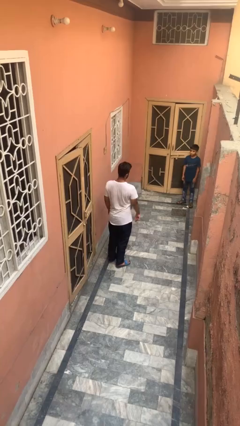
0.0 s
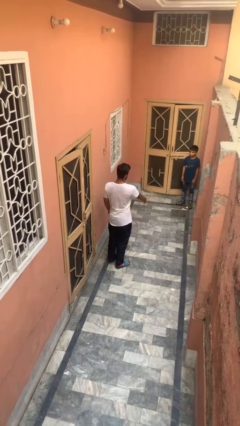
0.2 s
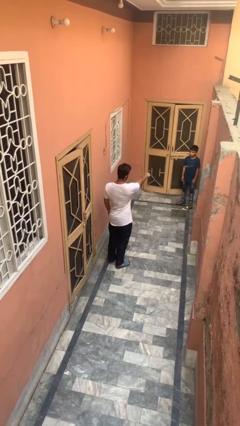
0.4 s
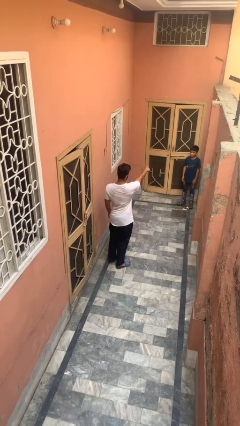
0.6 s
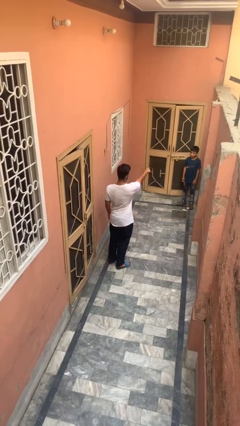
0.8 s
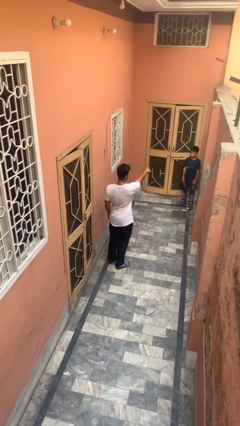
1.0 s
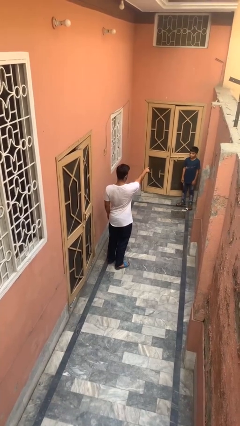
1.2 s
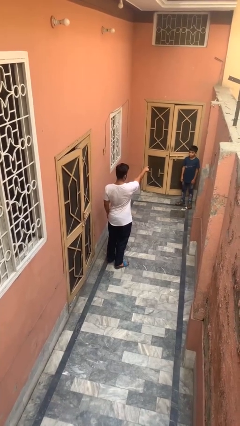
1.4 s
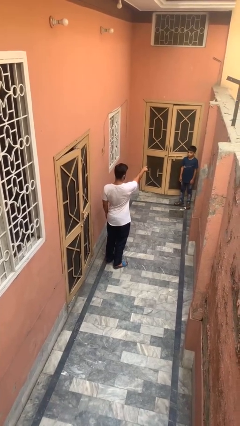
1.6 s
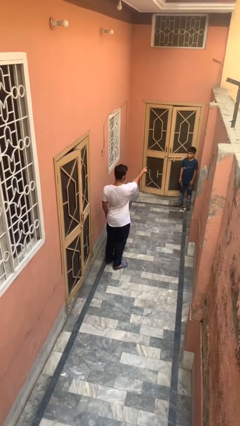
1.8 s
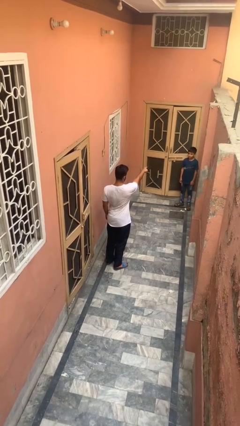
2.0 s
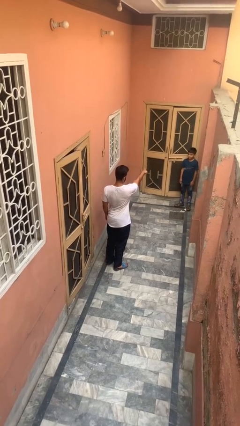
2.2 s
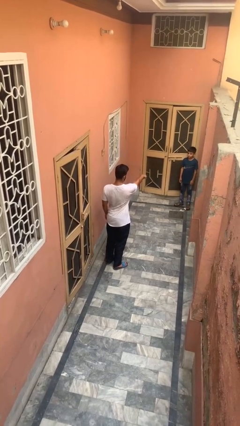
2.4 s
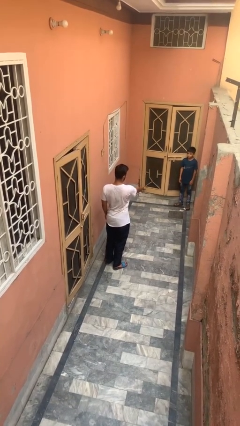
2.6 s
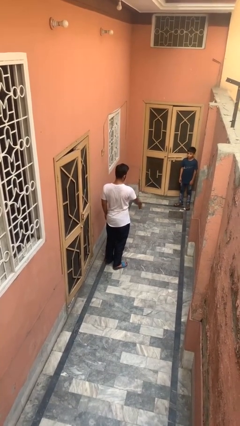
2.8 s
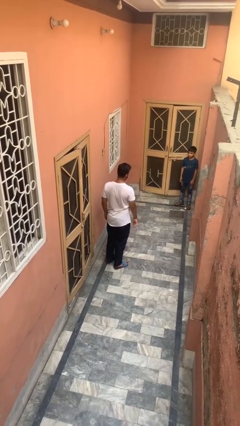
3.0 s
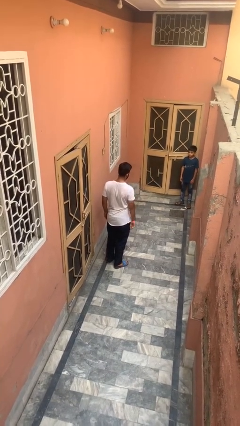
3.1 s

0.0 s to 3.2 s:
person points at person

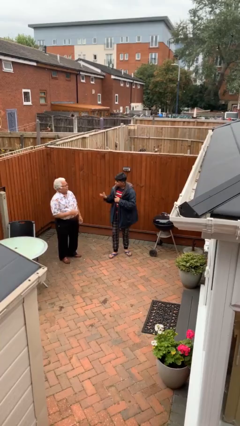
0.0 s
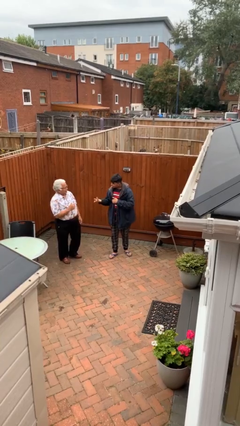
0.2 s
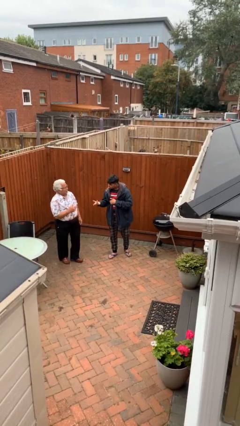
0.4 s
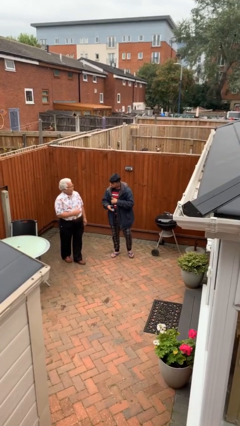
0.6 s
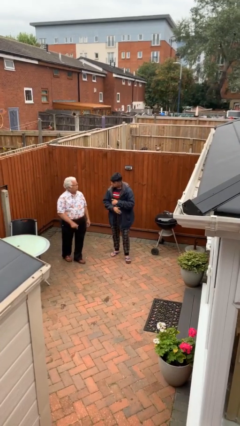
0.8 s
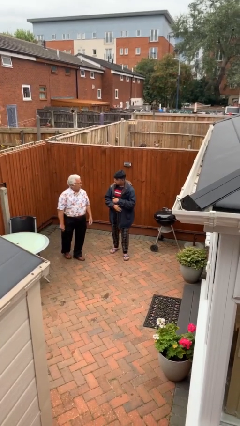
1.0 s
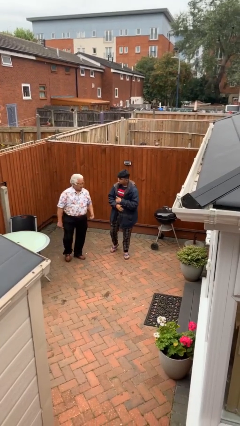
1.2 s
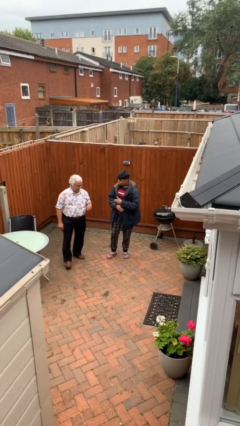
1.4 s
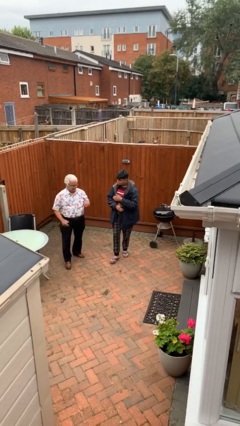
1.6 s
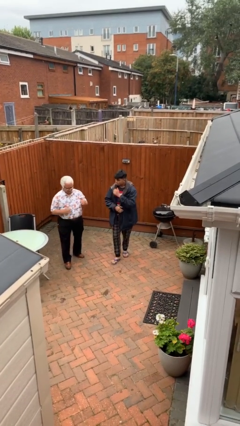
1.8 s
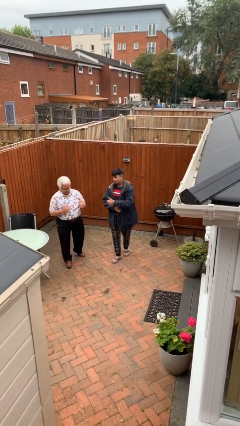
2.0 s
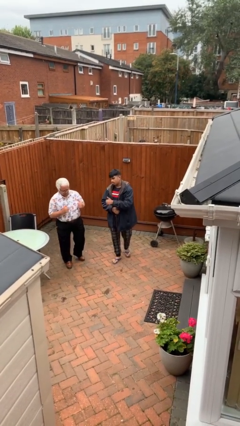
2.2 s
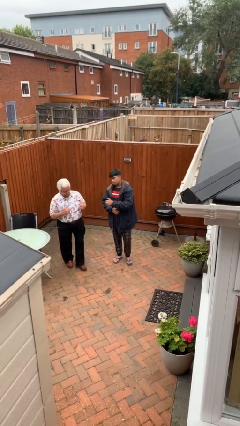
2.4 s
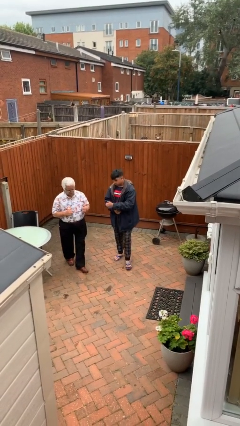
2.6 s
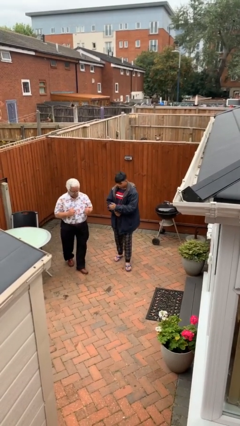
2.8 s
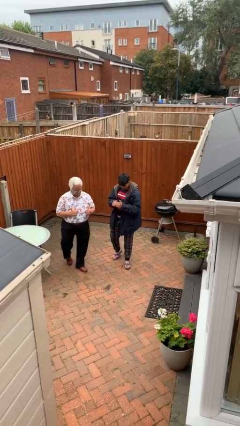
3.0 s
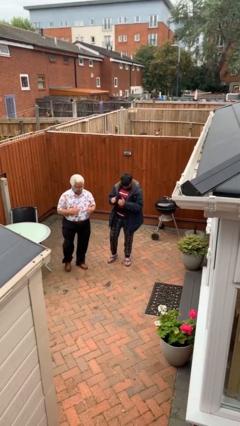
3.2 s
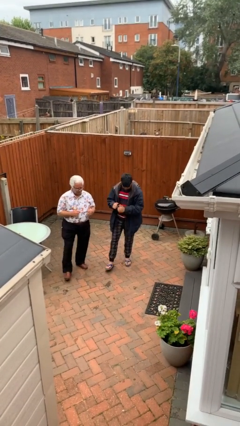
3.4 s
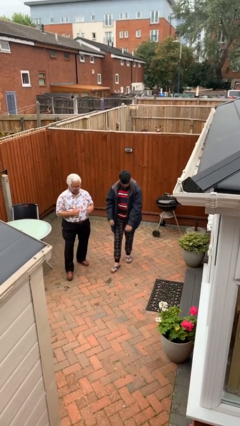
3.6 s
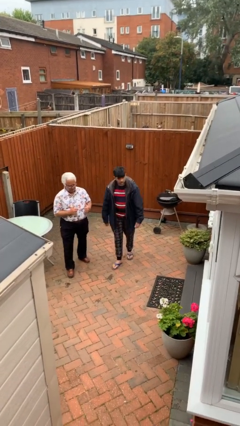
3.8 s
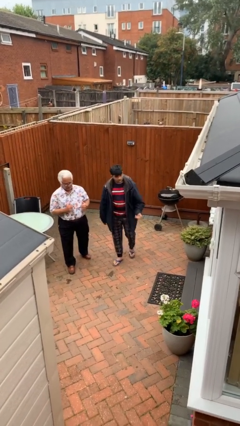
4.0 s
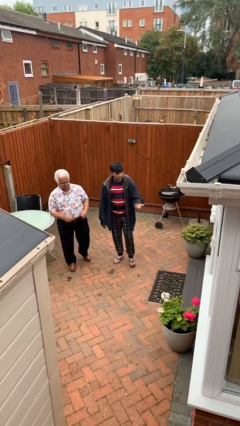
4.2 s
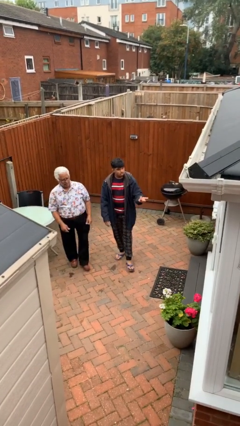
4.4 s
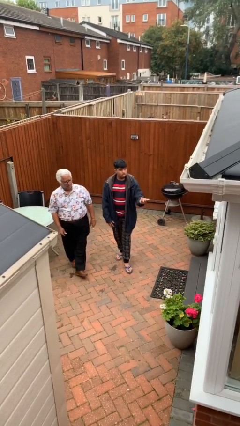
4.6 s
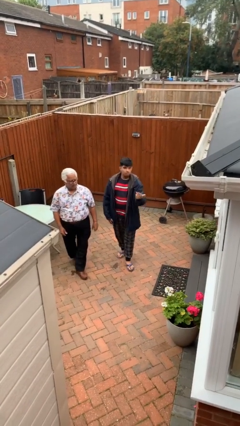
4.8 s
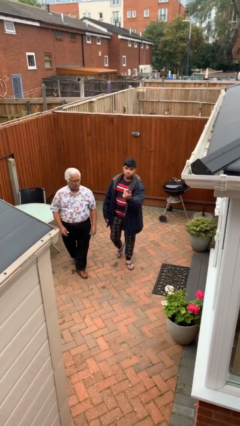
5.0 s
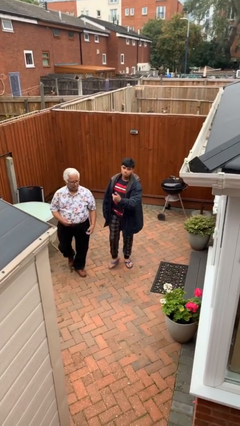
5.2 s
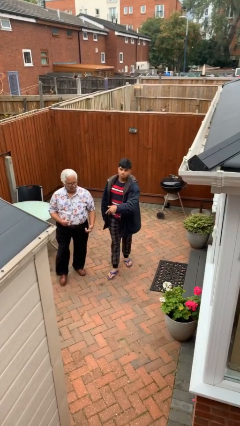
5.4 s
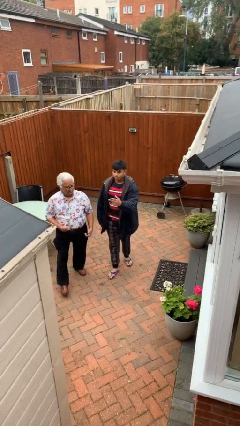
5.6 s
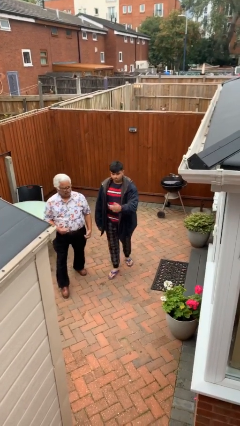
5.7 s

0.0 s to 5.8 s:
person talks to person

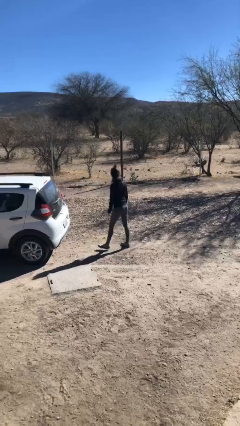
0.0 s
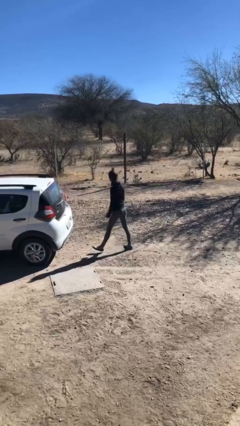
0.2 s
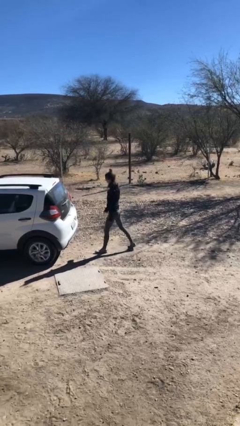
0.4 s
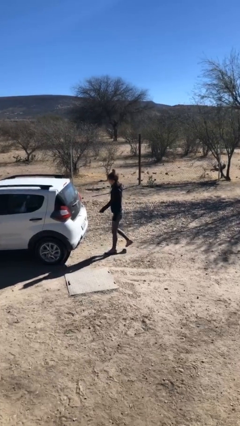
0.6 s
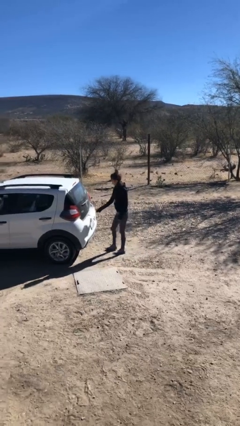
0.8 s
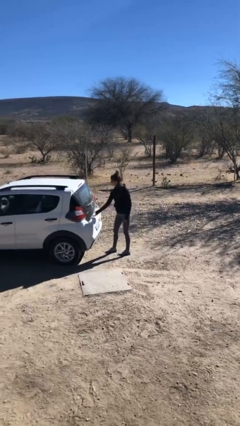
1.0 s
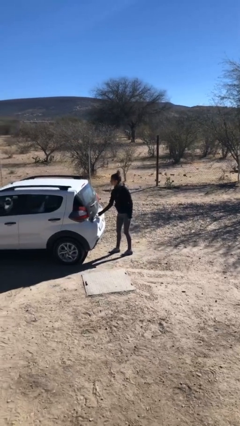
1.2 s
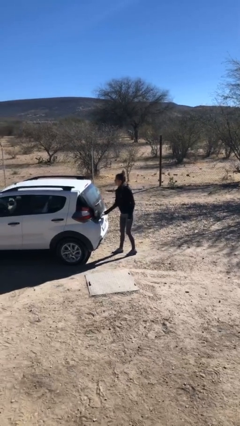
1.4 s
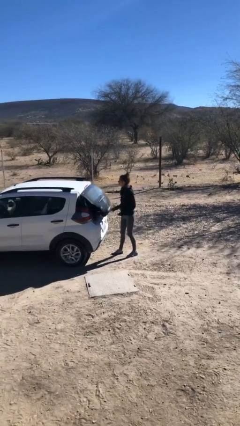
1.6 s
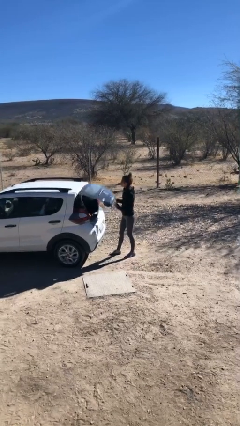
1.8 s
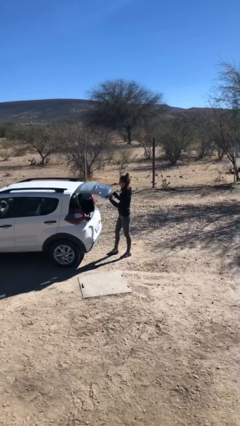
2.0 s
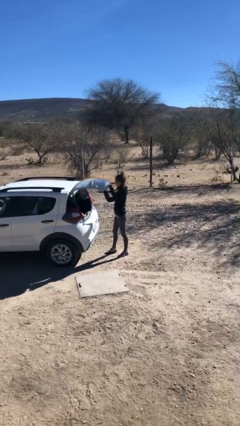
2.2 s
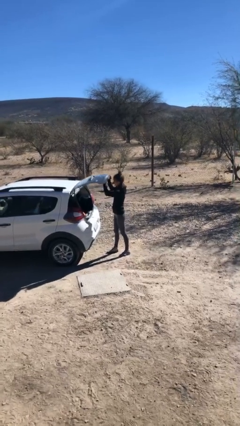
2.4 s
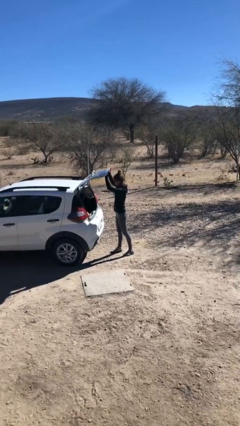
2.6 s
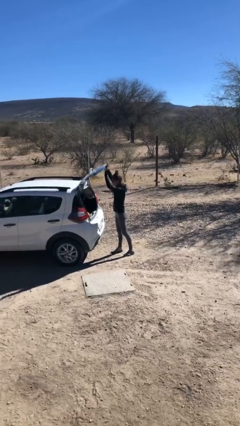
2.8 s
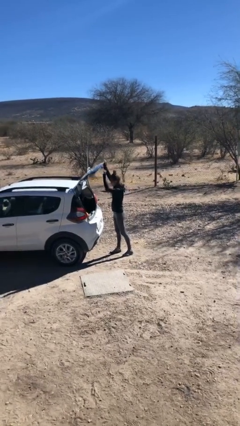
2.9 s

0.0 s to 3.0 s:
person opens car trunk

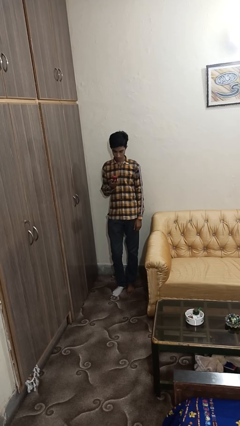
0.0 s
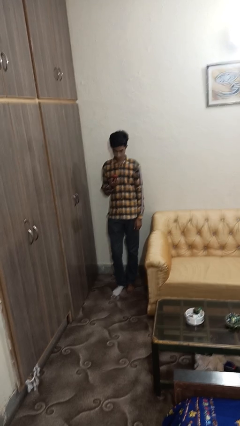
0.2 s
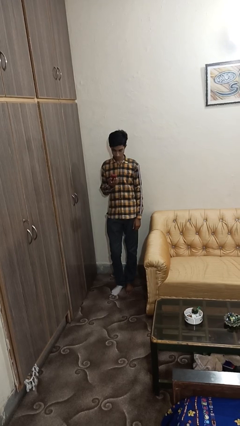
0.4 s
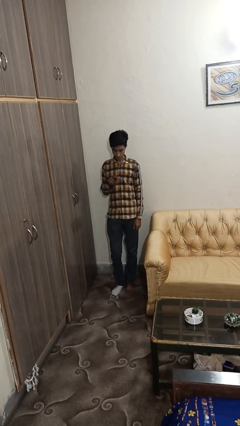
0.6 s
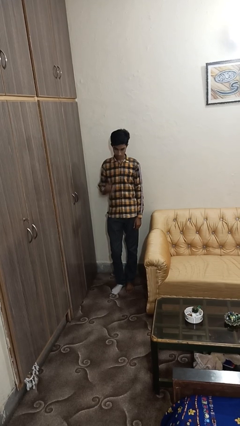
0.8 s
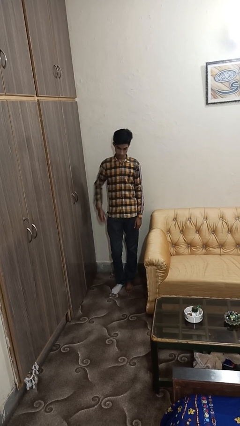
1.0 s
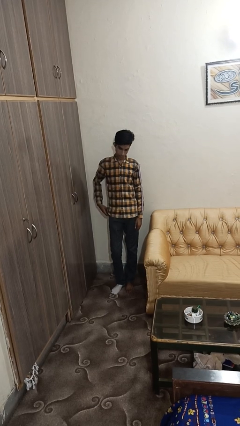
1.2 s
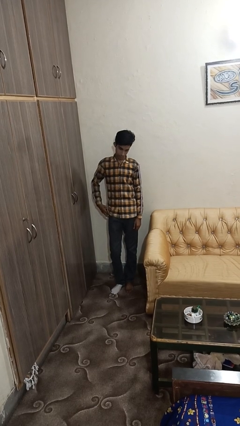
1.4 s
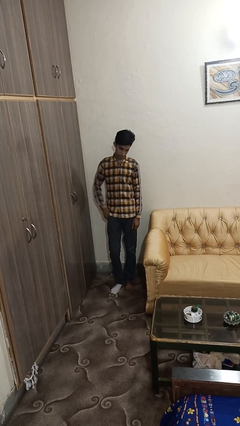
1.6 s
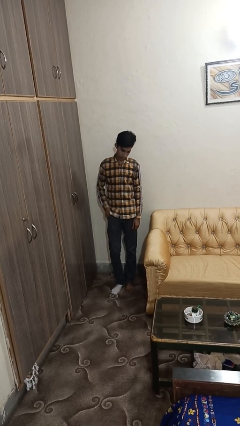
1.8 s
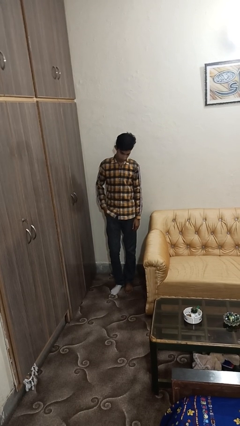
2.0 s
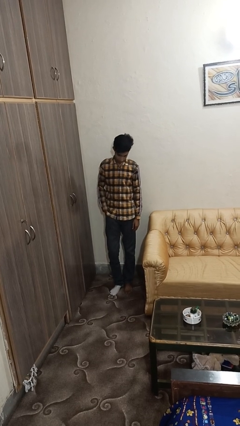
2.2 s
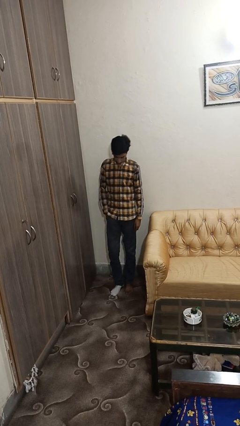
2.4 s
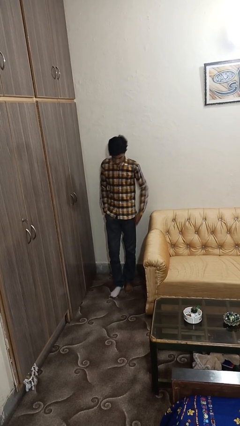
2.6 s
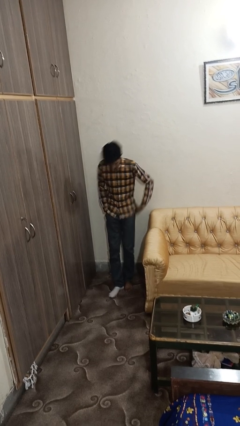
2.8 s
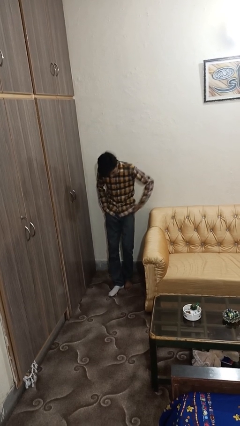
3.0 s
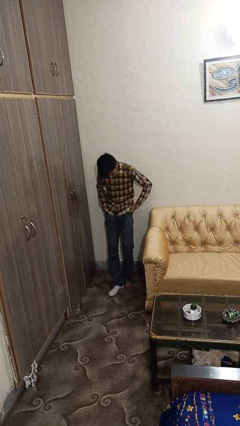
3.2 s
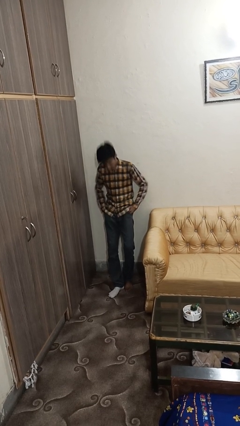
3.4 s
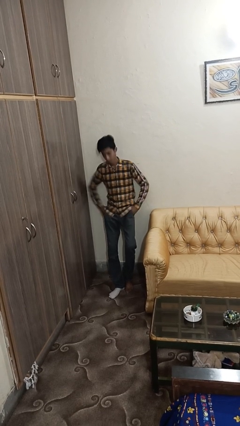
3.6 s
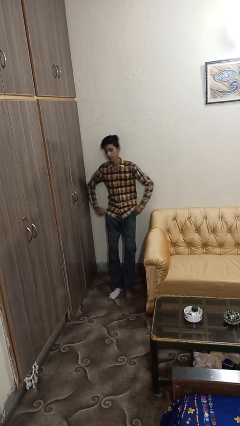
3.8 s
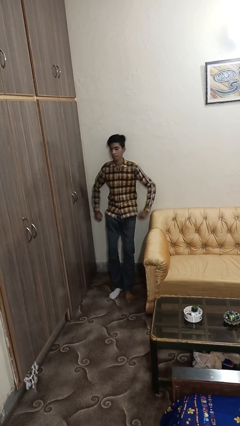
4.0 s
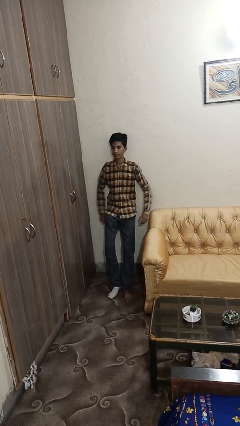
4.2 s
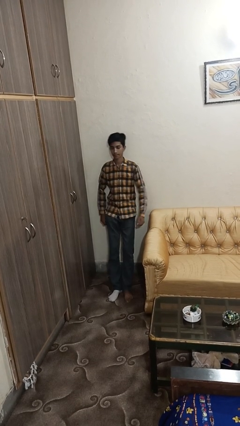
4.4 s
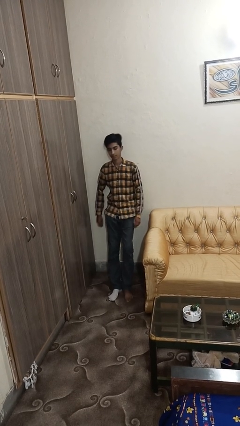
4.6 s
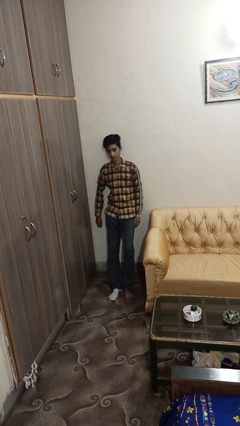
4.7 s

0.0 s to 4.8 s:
person puts phone into pocket

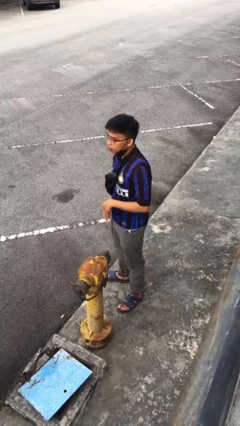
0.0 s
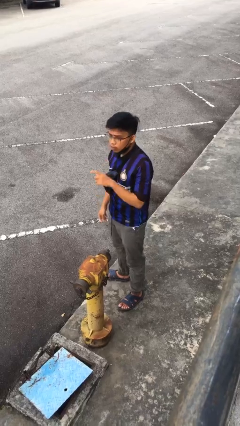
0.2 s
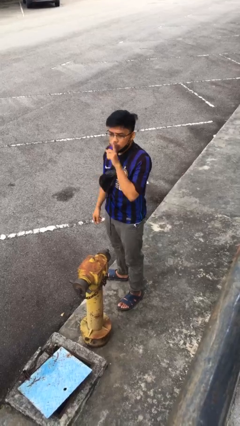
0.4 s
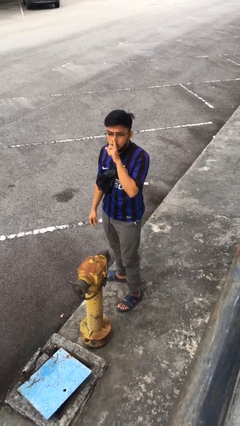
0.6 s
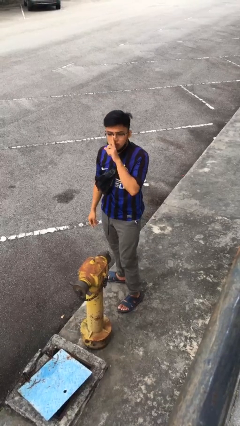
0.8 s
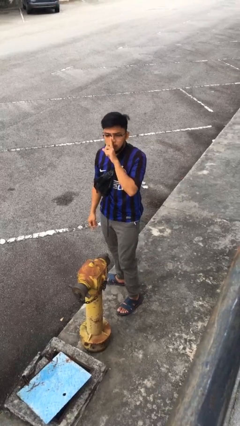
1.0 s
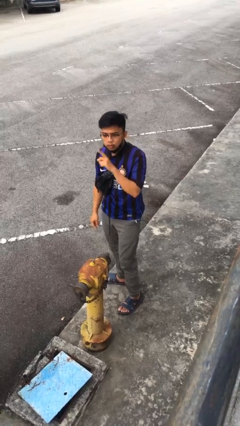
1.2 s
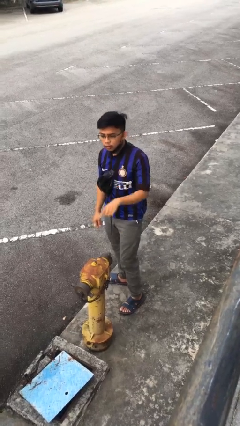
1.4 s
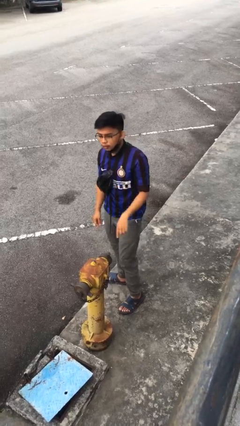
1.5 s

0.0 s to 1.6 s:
person gestures be quiet
